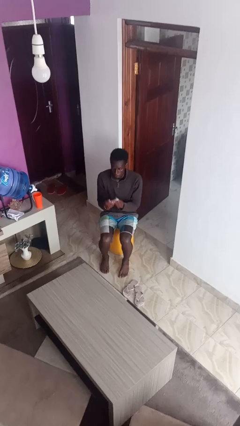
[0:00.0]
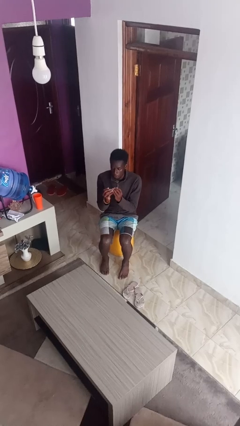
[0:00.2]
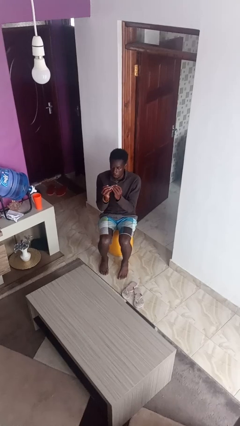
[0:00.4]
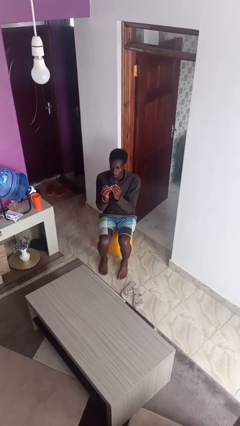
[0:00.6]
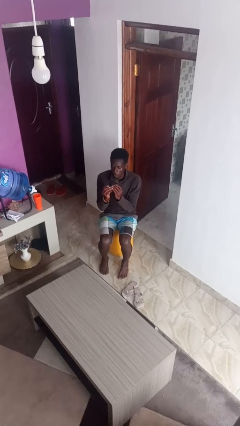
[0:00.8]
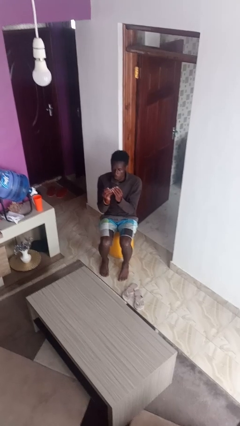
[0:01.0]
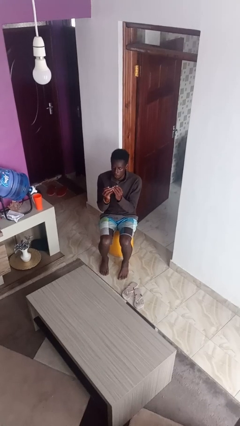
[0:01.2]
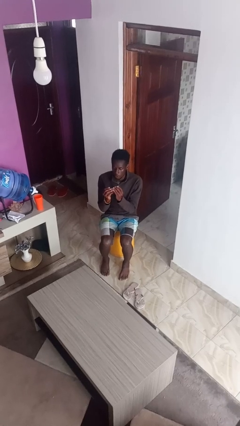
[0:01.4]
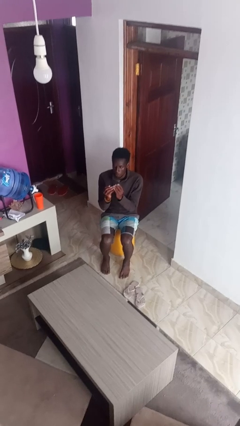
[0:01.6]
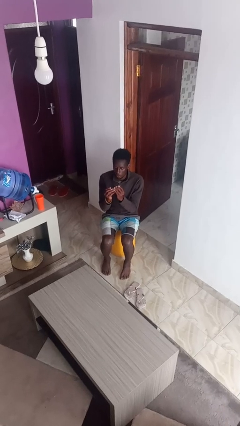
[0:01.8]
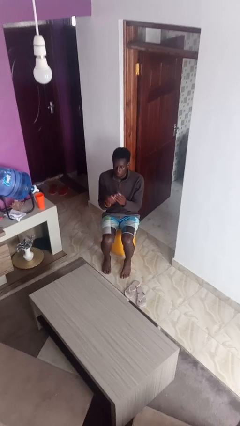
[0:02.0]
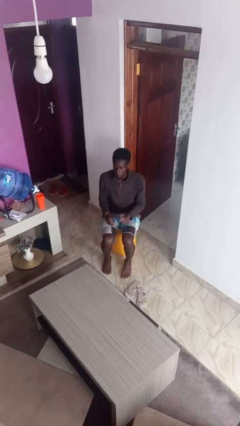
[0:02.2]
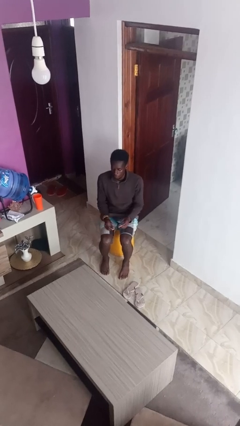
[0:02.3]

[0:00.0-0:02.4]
person clips fingernails

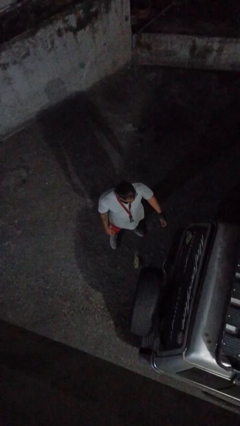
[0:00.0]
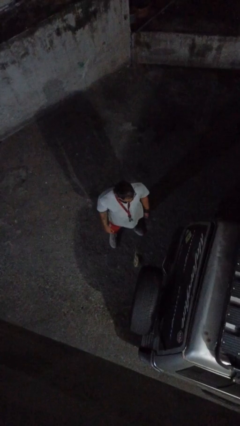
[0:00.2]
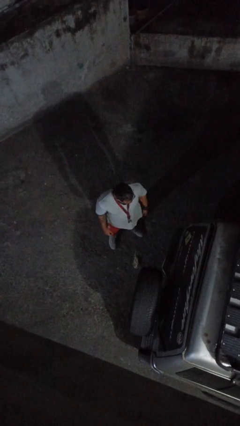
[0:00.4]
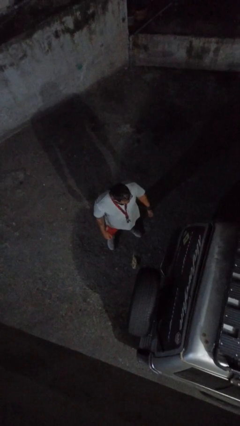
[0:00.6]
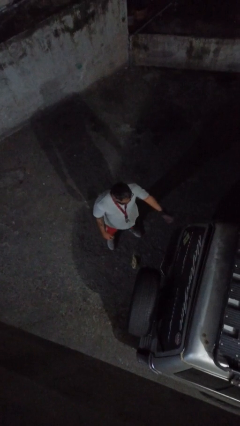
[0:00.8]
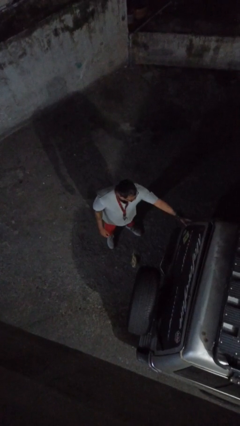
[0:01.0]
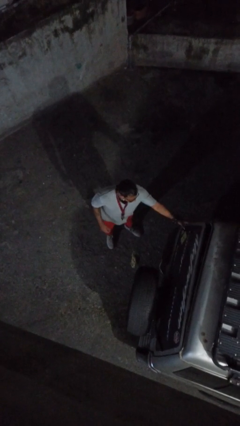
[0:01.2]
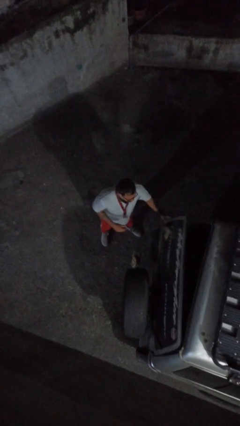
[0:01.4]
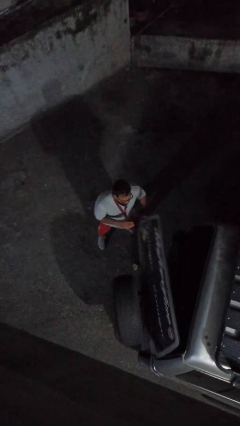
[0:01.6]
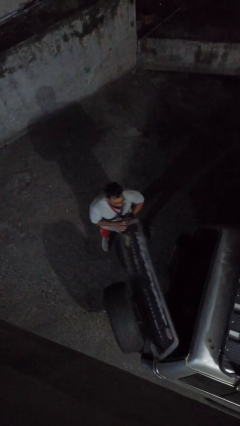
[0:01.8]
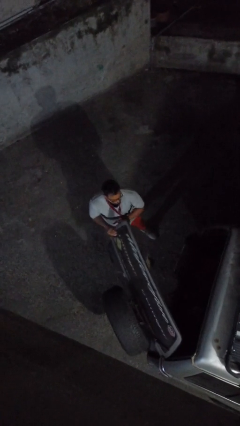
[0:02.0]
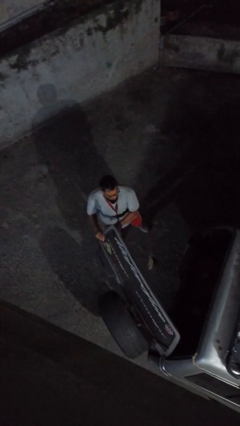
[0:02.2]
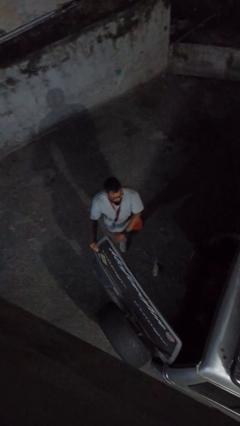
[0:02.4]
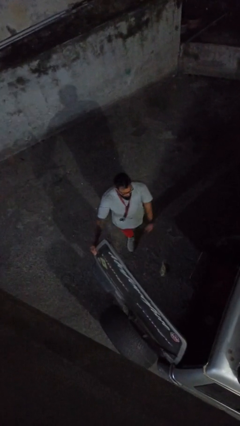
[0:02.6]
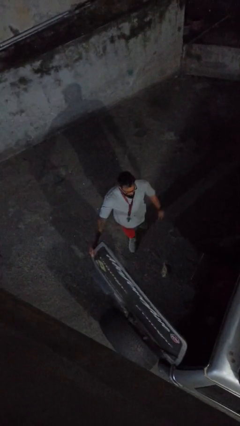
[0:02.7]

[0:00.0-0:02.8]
person opens car trunk

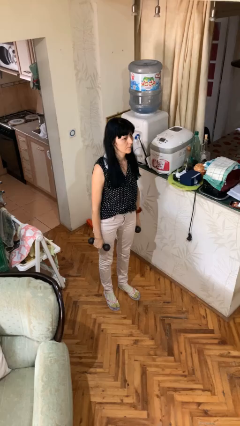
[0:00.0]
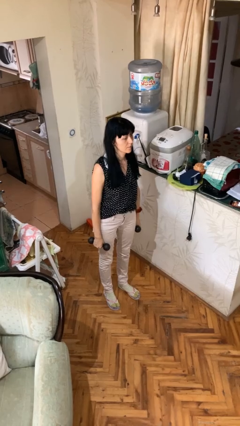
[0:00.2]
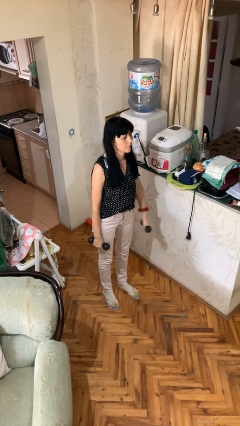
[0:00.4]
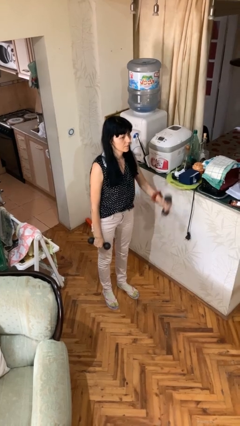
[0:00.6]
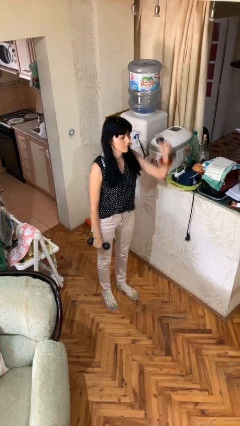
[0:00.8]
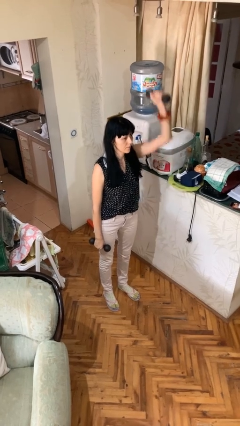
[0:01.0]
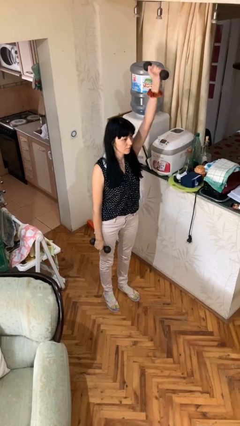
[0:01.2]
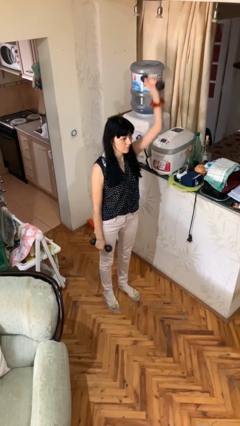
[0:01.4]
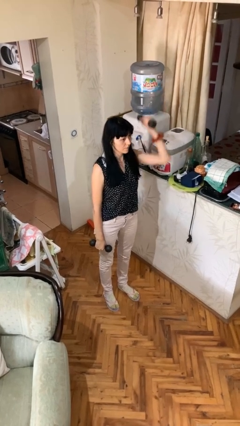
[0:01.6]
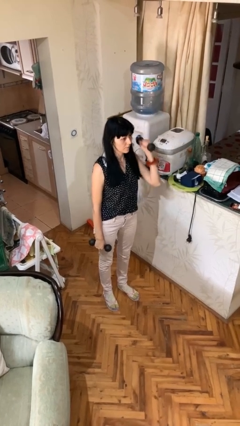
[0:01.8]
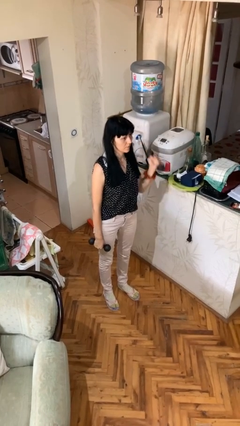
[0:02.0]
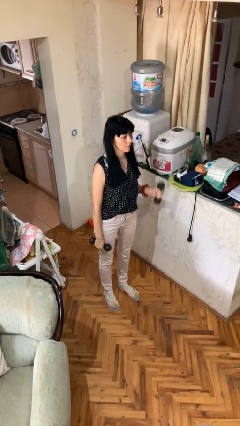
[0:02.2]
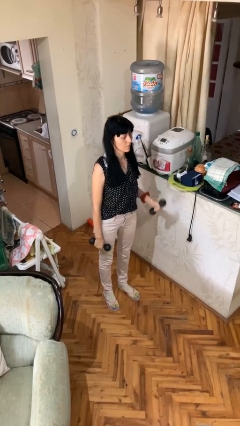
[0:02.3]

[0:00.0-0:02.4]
person lifts dumbbells

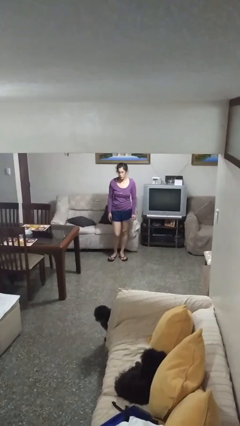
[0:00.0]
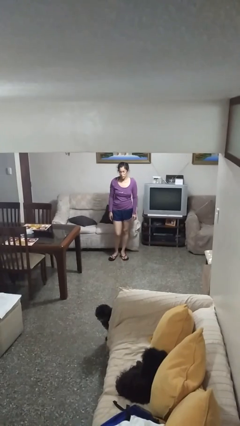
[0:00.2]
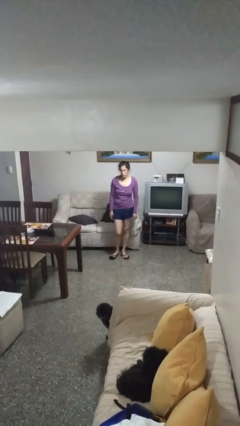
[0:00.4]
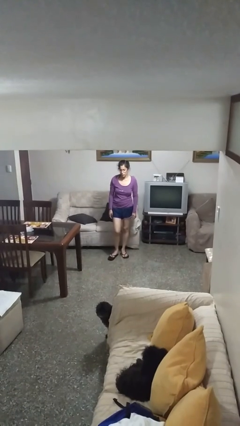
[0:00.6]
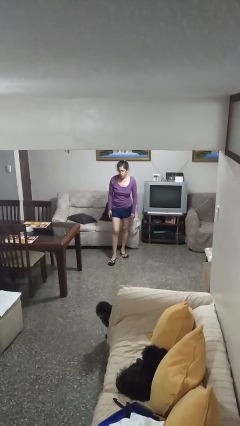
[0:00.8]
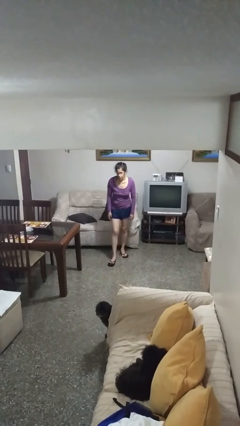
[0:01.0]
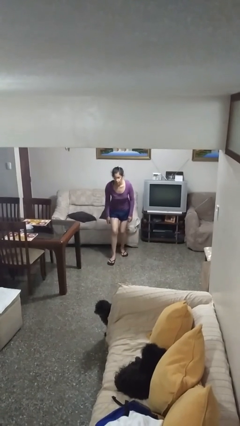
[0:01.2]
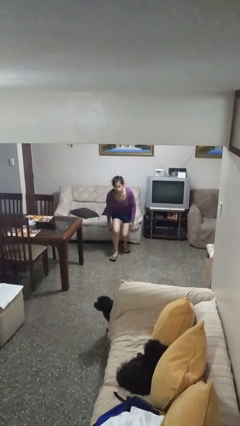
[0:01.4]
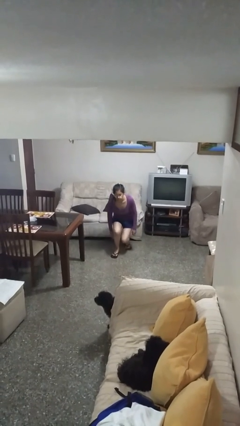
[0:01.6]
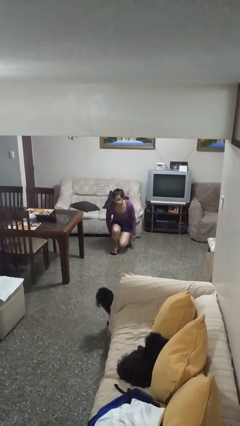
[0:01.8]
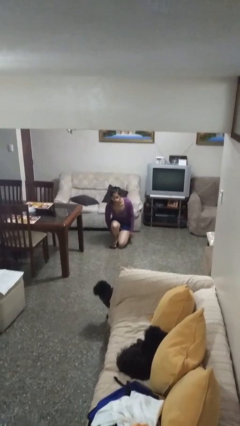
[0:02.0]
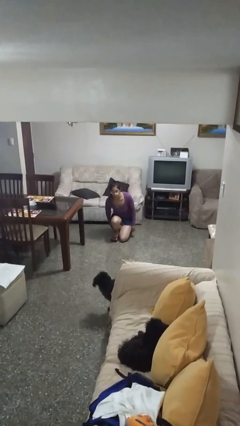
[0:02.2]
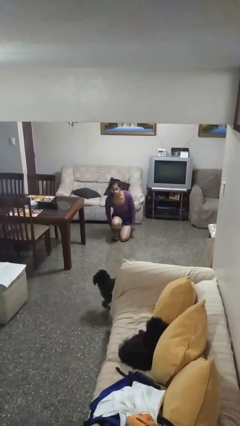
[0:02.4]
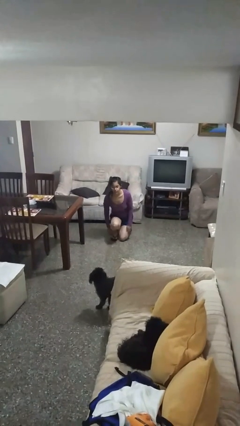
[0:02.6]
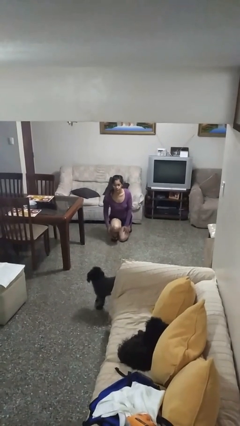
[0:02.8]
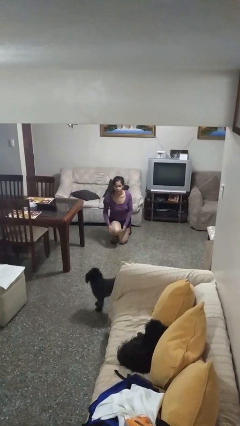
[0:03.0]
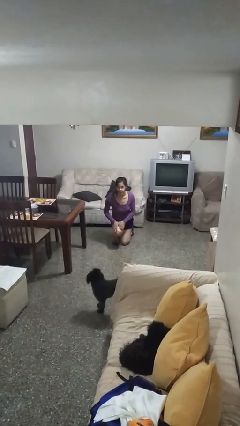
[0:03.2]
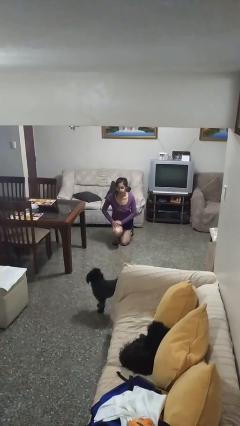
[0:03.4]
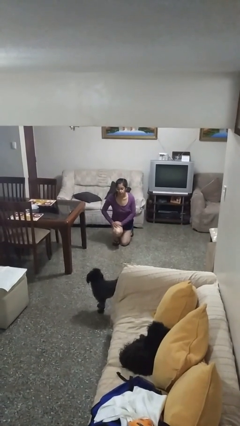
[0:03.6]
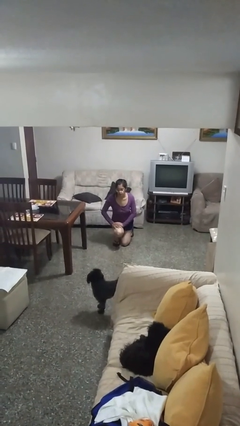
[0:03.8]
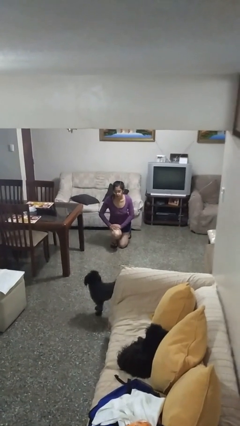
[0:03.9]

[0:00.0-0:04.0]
person kneels

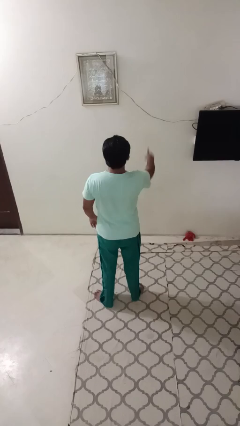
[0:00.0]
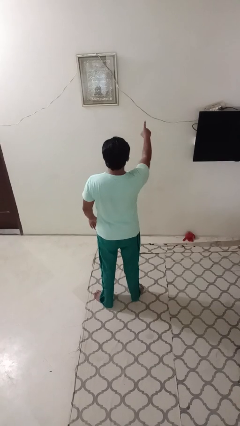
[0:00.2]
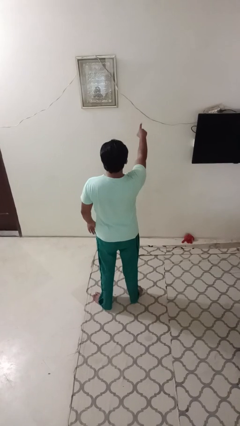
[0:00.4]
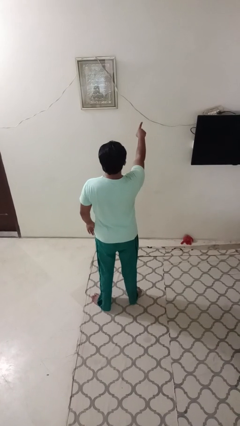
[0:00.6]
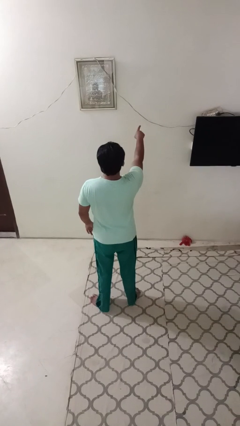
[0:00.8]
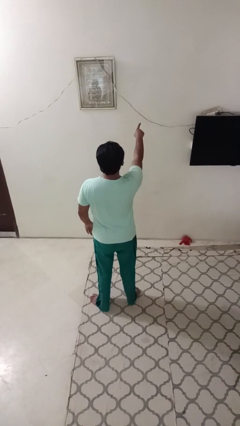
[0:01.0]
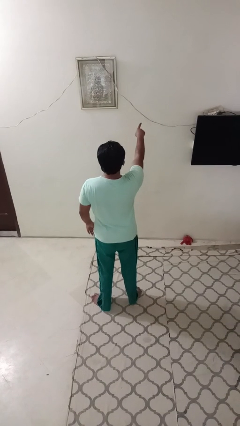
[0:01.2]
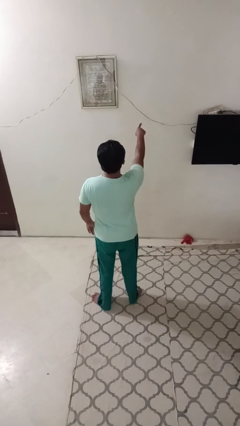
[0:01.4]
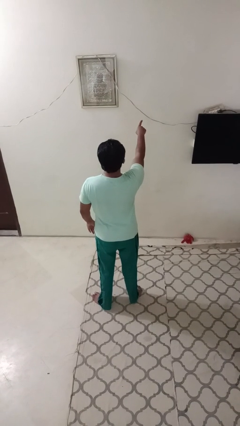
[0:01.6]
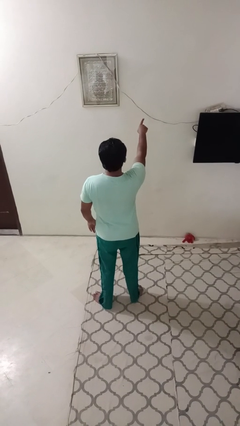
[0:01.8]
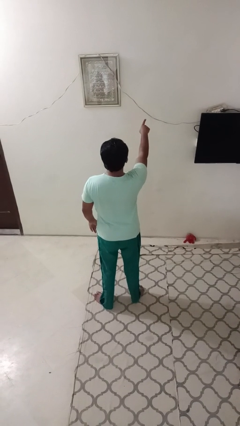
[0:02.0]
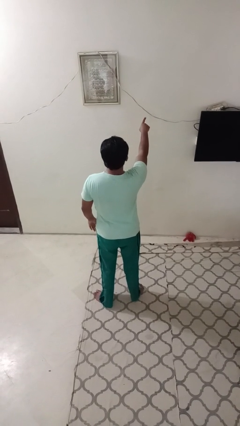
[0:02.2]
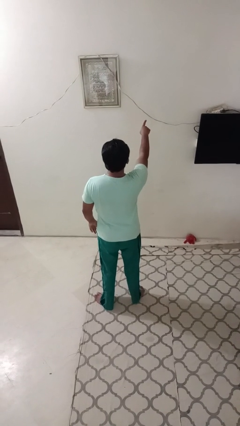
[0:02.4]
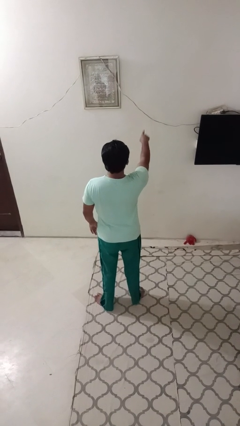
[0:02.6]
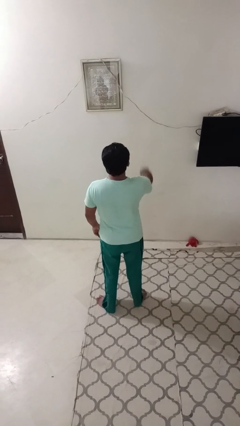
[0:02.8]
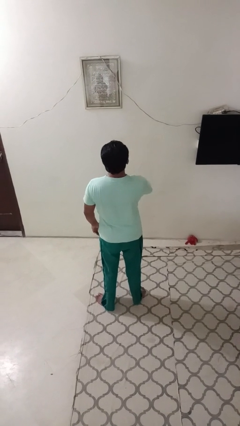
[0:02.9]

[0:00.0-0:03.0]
person points at person

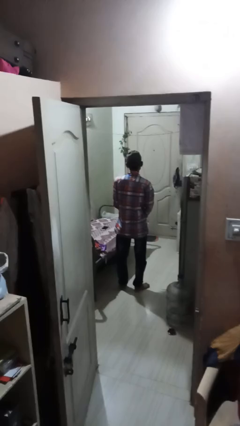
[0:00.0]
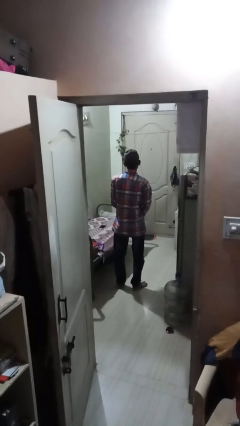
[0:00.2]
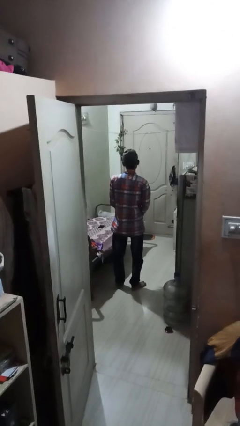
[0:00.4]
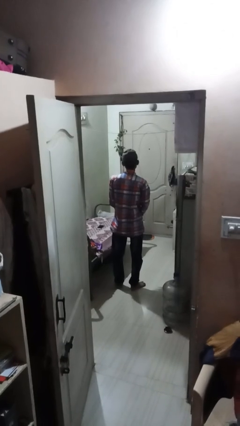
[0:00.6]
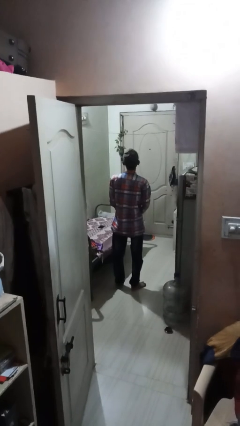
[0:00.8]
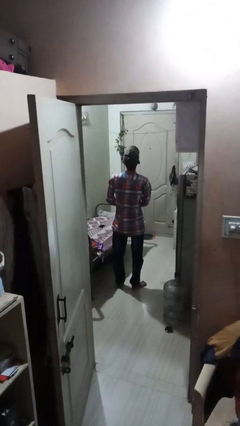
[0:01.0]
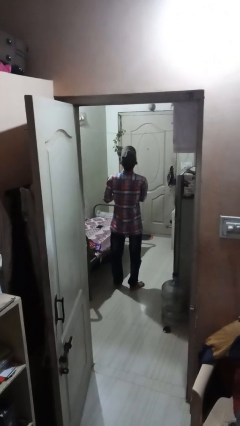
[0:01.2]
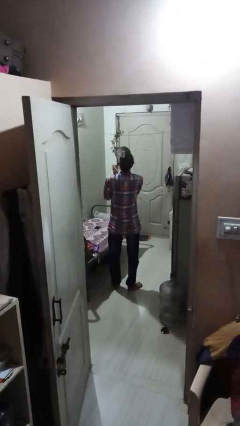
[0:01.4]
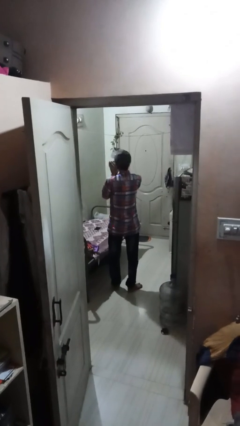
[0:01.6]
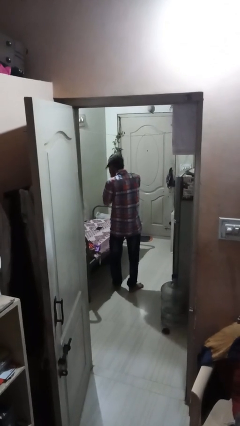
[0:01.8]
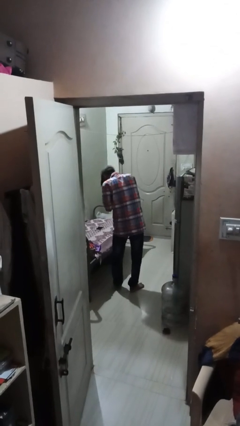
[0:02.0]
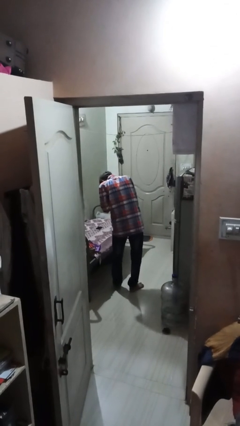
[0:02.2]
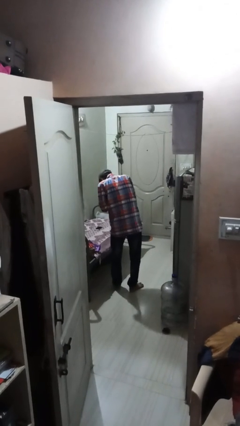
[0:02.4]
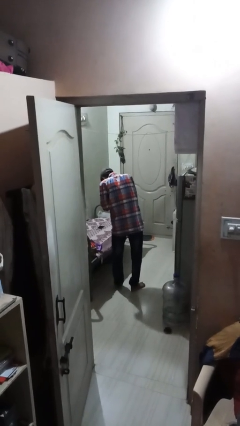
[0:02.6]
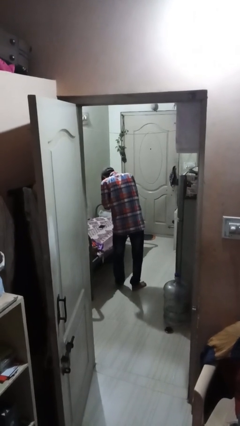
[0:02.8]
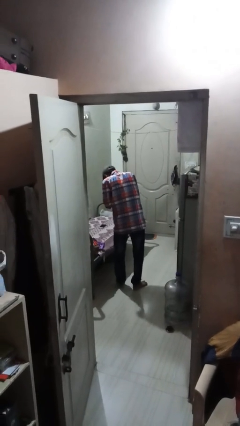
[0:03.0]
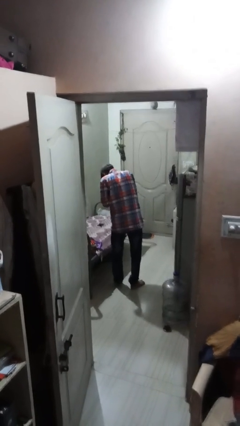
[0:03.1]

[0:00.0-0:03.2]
person sneezes into hand
